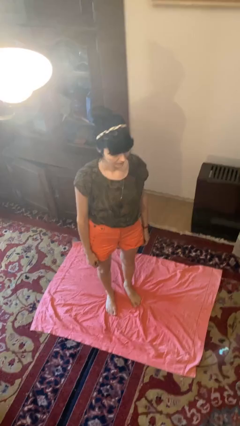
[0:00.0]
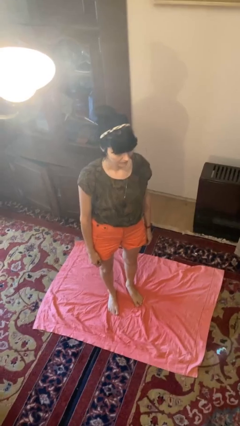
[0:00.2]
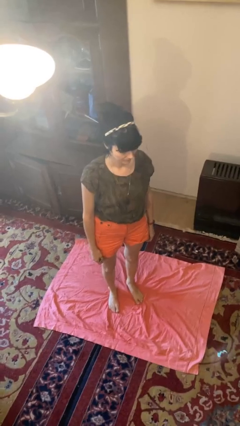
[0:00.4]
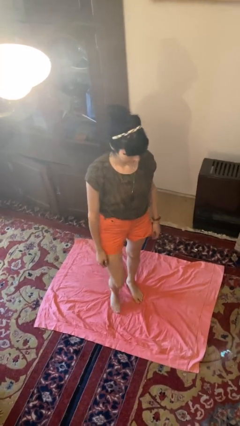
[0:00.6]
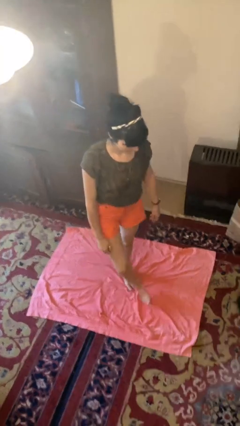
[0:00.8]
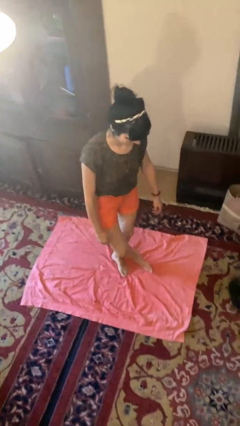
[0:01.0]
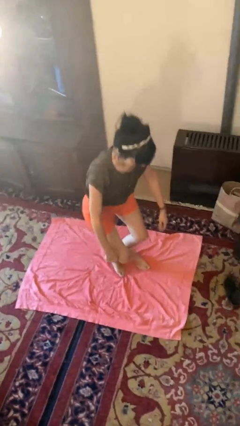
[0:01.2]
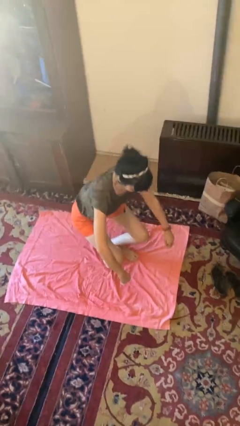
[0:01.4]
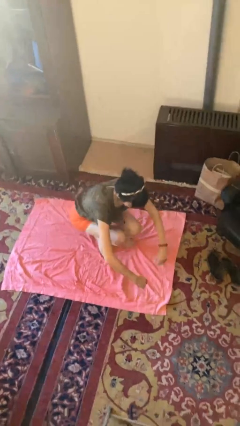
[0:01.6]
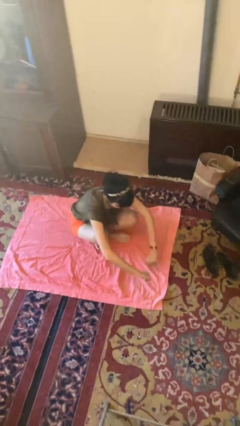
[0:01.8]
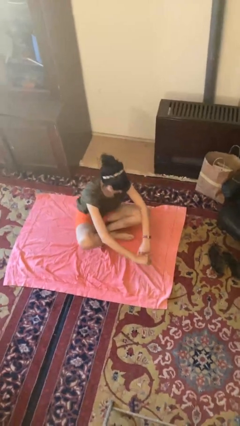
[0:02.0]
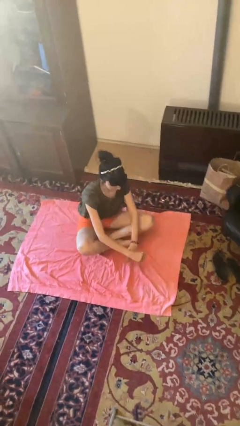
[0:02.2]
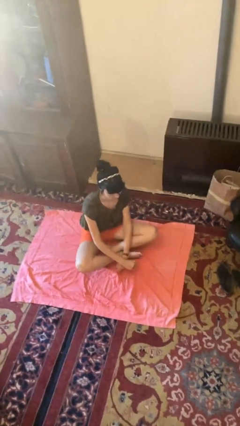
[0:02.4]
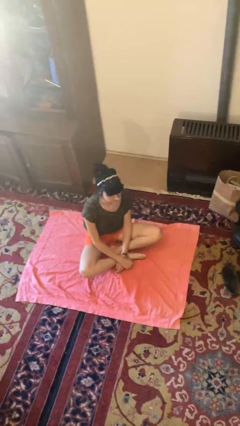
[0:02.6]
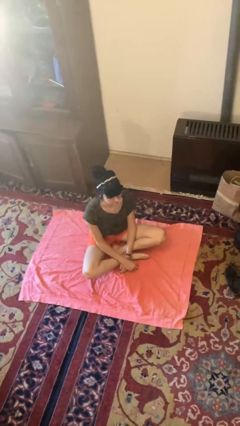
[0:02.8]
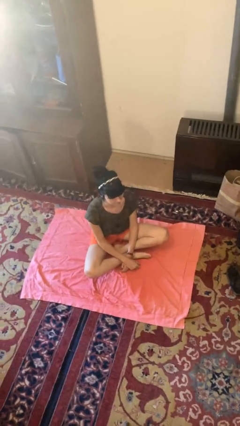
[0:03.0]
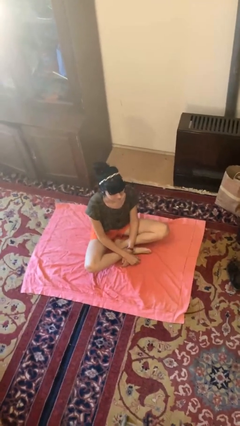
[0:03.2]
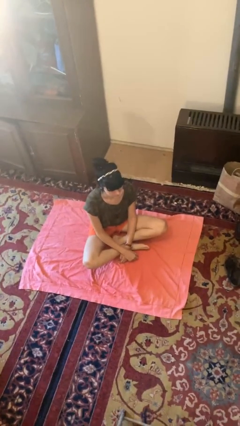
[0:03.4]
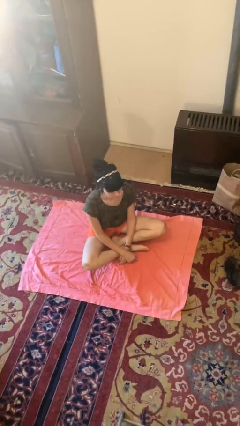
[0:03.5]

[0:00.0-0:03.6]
person sits crisscross

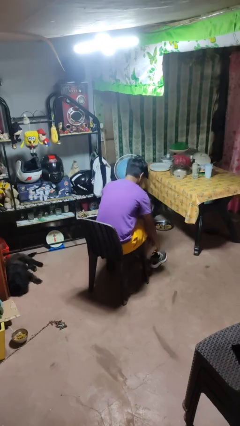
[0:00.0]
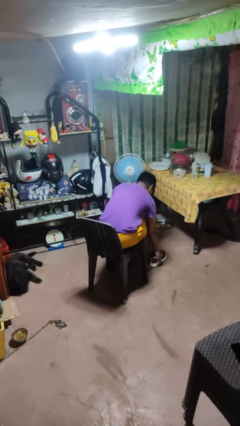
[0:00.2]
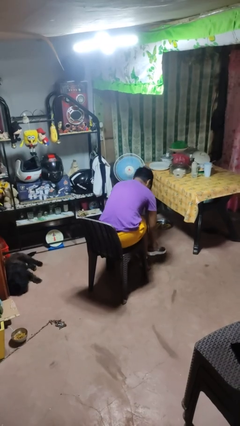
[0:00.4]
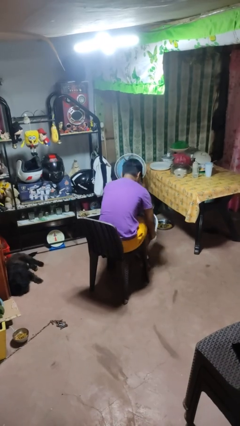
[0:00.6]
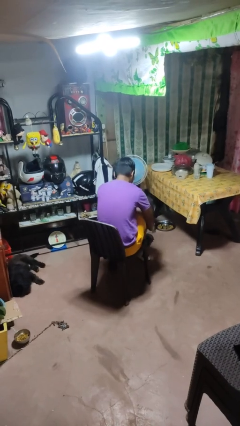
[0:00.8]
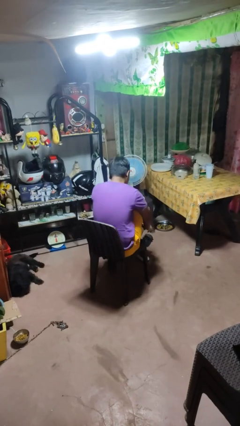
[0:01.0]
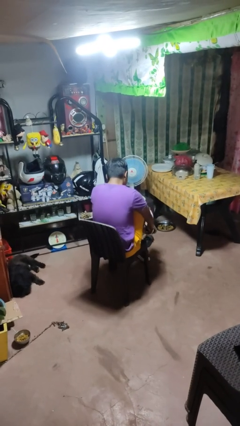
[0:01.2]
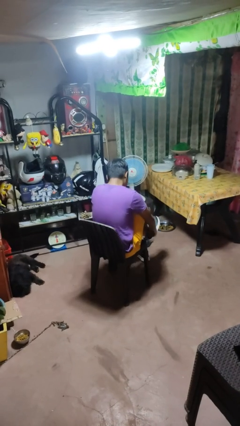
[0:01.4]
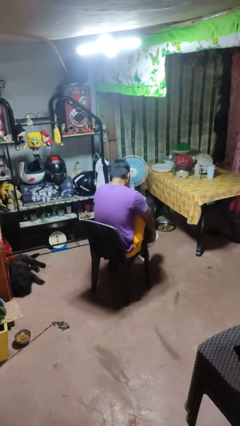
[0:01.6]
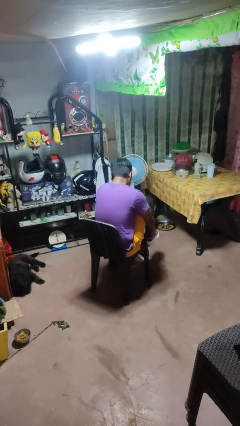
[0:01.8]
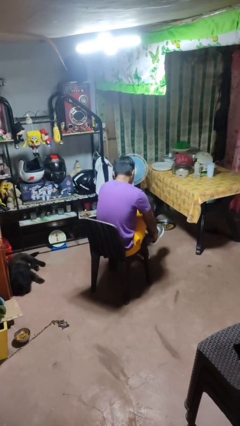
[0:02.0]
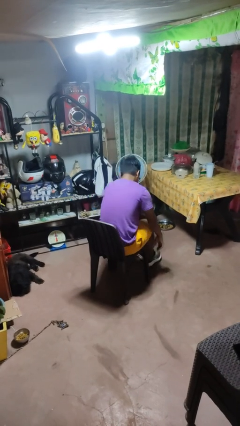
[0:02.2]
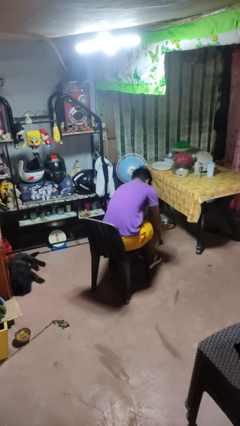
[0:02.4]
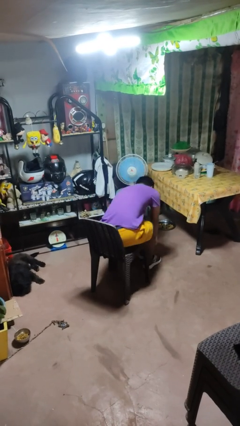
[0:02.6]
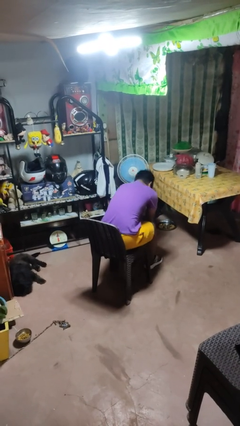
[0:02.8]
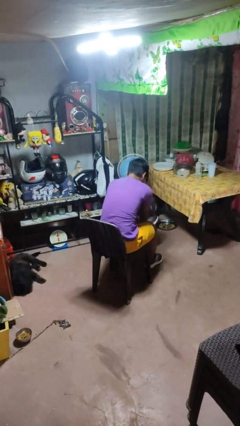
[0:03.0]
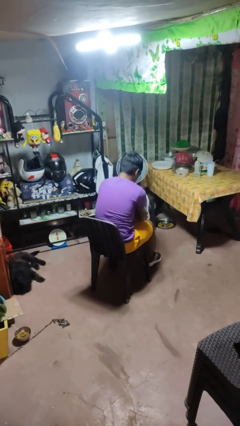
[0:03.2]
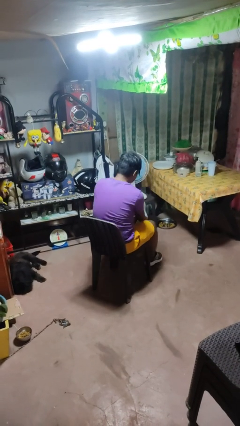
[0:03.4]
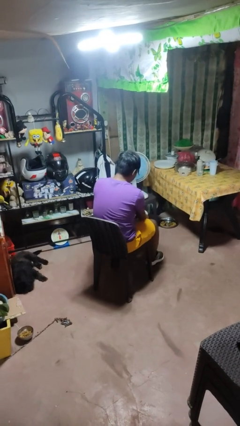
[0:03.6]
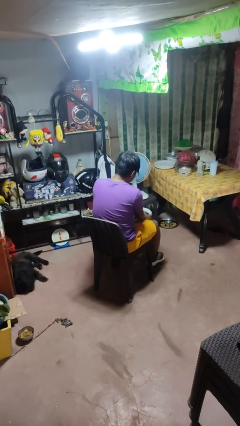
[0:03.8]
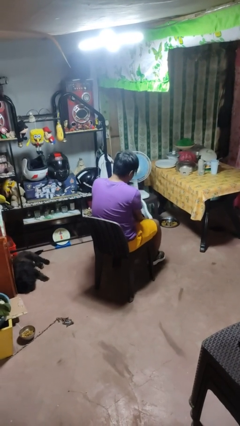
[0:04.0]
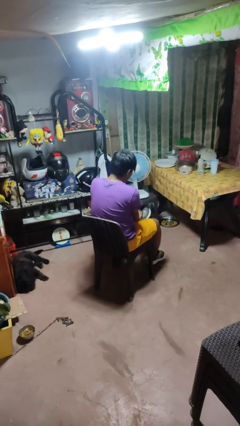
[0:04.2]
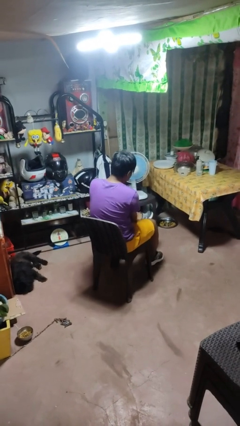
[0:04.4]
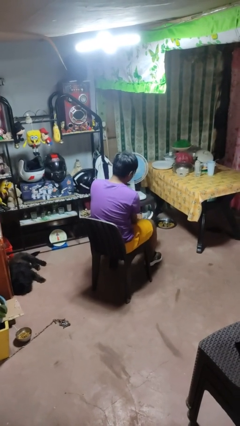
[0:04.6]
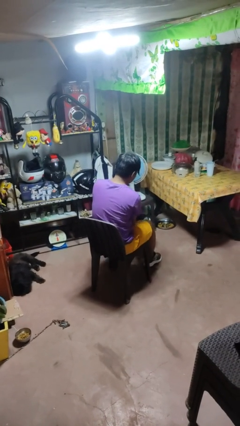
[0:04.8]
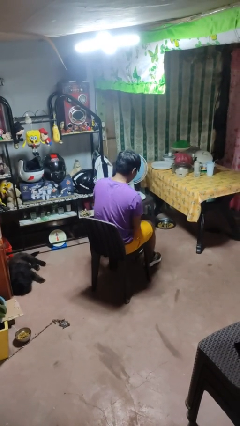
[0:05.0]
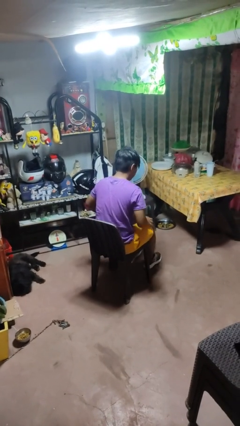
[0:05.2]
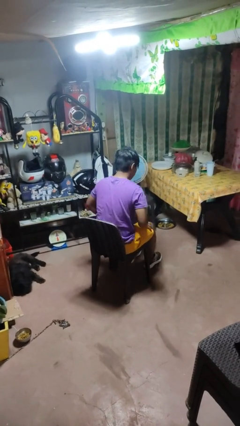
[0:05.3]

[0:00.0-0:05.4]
person puts on shoes

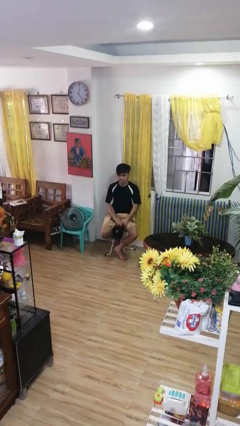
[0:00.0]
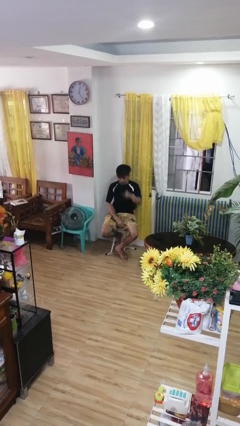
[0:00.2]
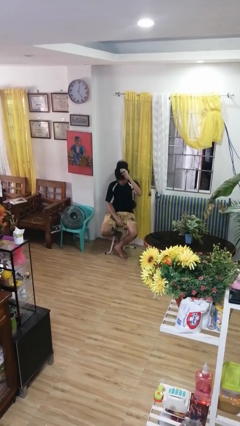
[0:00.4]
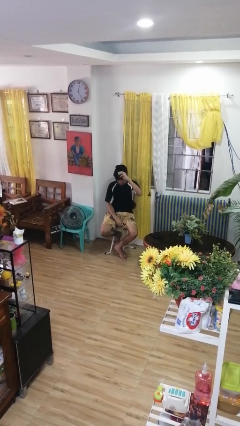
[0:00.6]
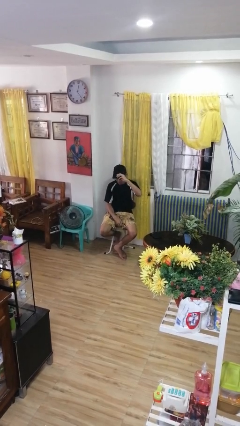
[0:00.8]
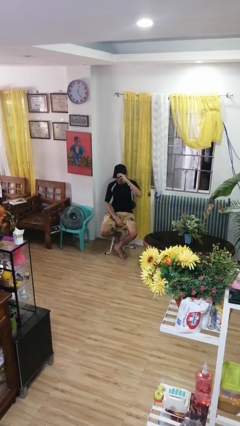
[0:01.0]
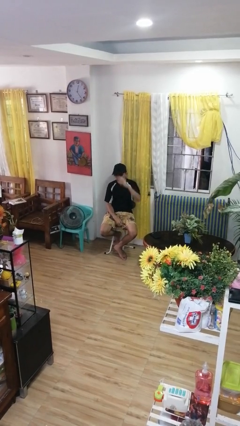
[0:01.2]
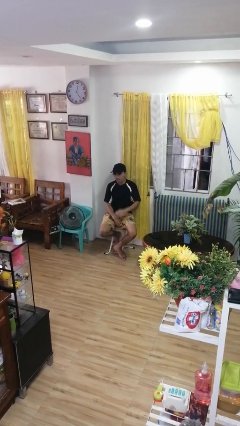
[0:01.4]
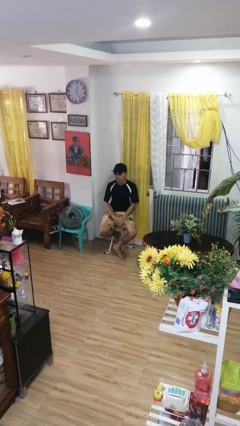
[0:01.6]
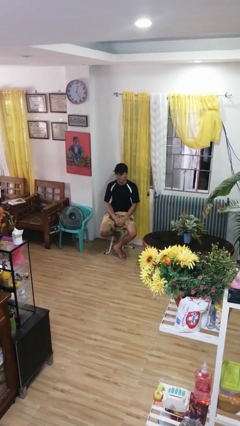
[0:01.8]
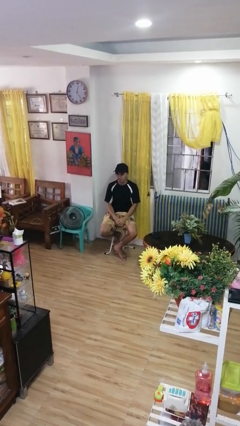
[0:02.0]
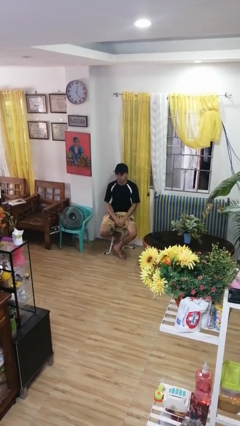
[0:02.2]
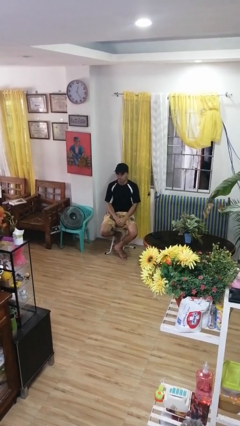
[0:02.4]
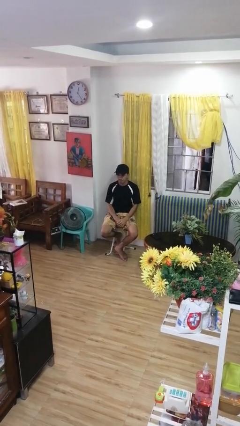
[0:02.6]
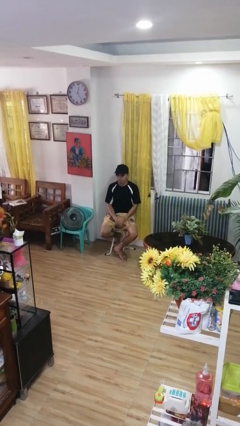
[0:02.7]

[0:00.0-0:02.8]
person puts on hat

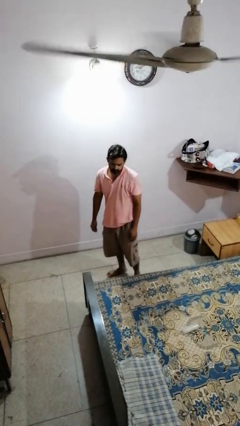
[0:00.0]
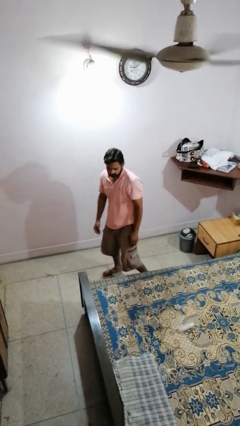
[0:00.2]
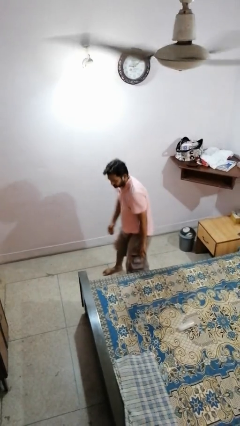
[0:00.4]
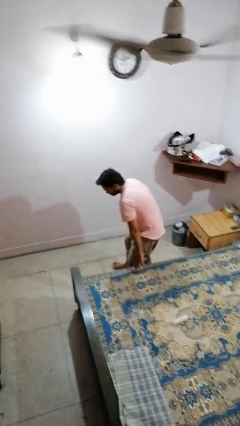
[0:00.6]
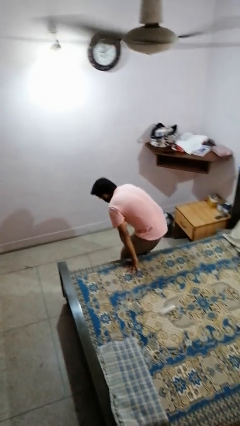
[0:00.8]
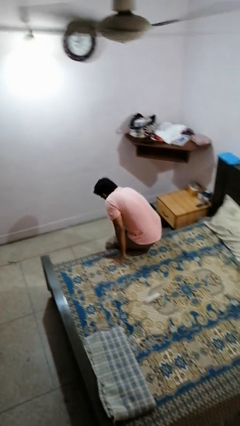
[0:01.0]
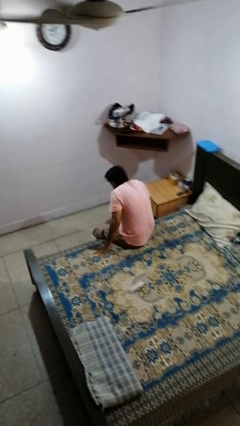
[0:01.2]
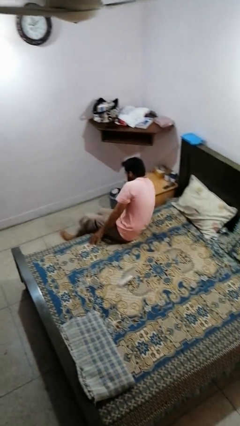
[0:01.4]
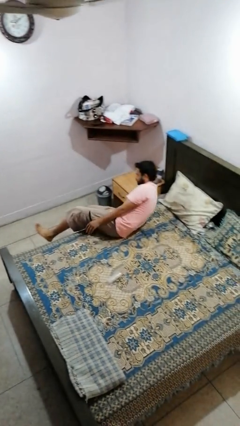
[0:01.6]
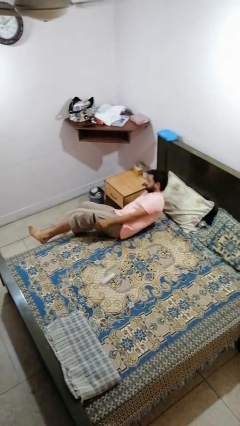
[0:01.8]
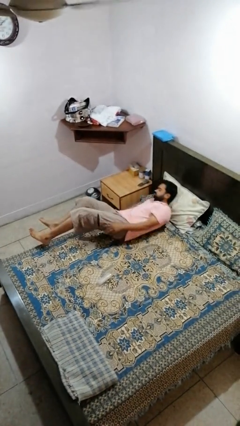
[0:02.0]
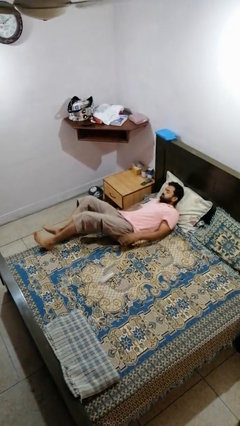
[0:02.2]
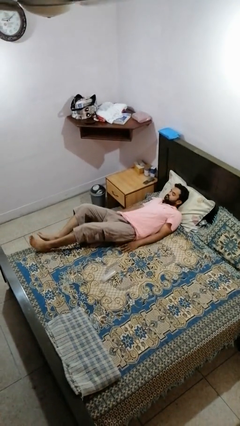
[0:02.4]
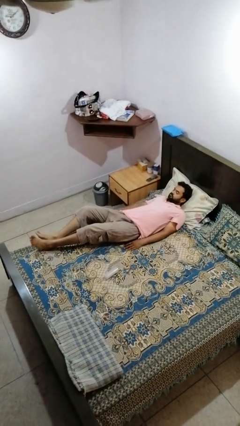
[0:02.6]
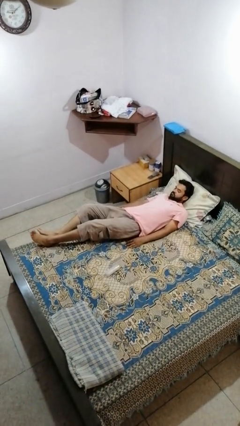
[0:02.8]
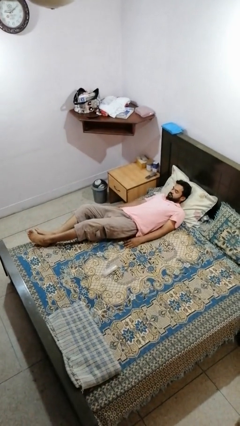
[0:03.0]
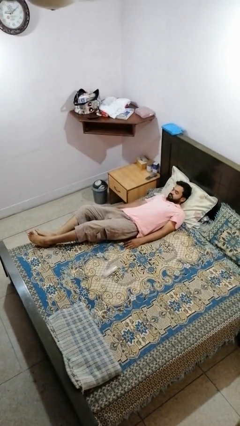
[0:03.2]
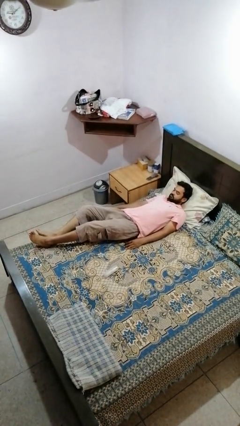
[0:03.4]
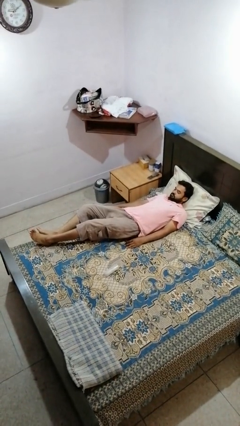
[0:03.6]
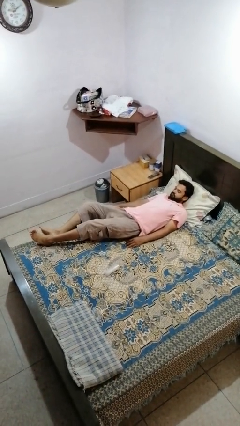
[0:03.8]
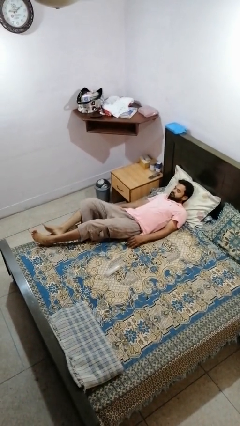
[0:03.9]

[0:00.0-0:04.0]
person lies down on bed

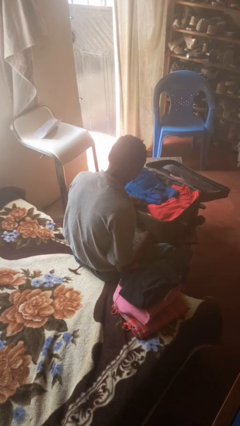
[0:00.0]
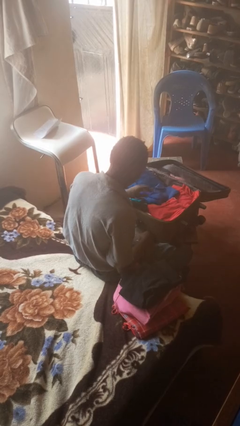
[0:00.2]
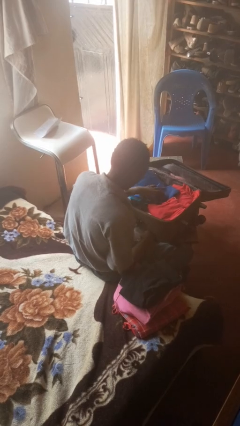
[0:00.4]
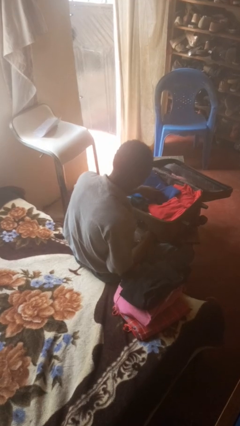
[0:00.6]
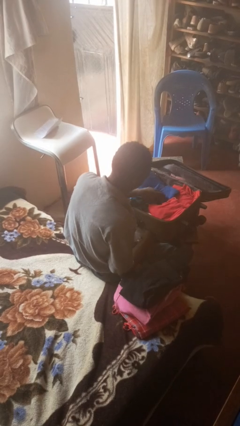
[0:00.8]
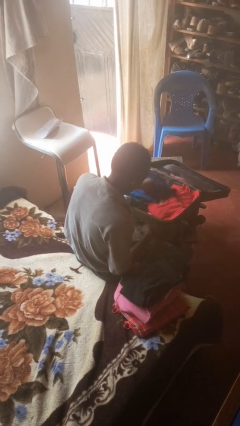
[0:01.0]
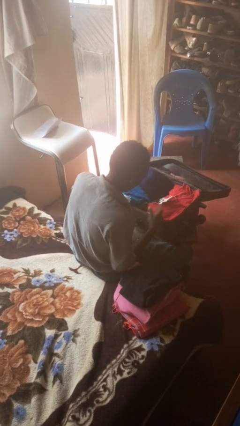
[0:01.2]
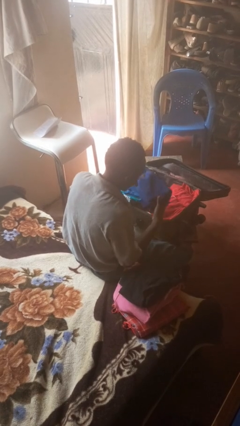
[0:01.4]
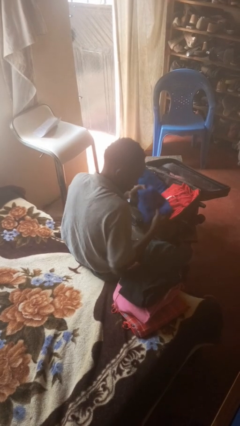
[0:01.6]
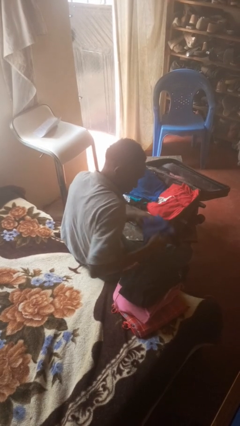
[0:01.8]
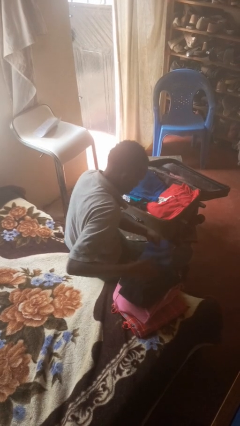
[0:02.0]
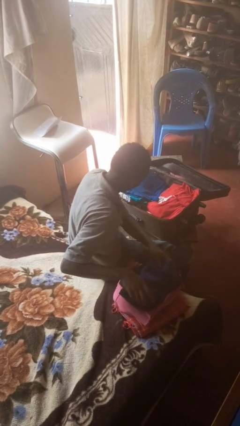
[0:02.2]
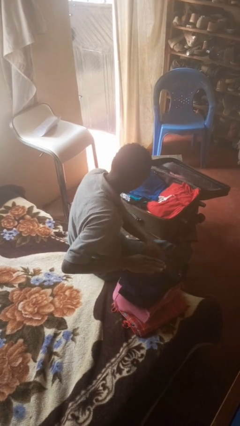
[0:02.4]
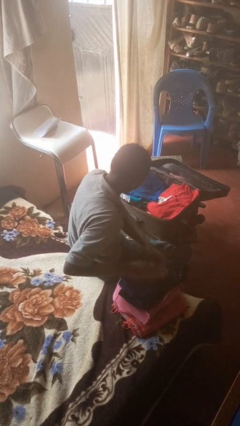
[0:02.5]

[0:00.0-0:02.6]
person unloads clothes from suitcase
